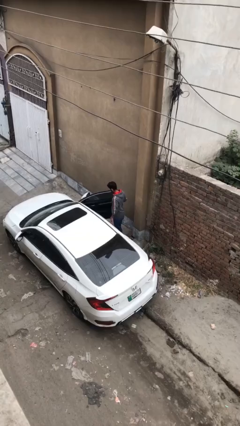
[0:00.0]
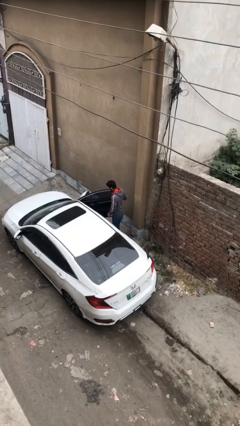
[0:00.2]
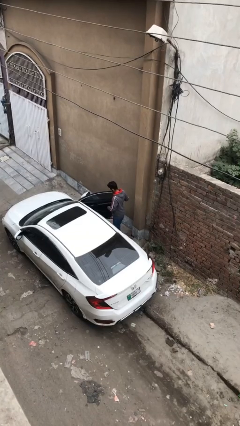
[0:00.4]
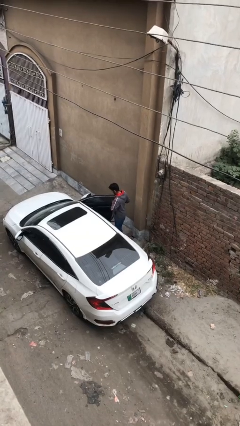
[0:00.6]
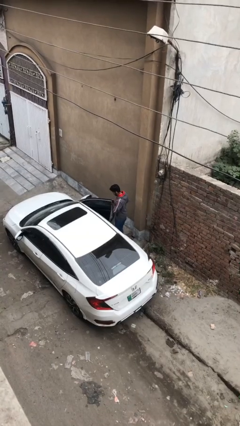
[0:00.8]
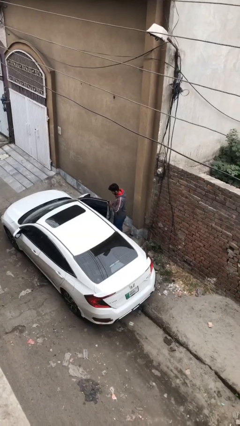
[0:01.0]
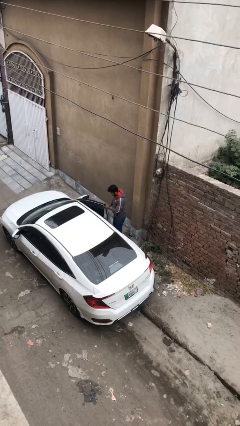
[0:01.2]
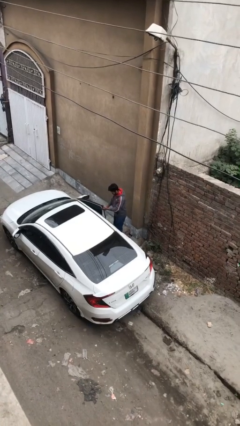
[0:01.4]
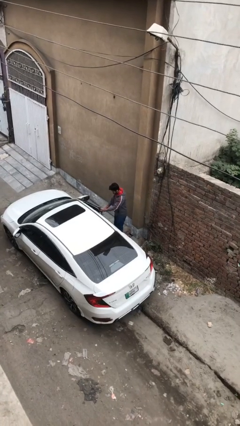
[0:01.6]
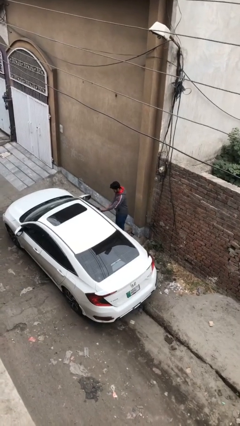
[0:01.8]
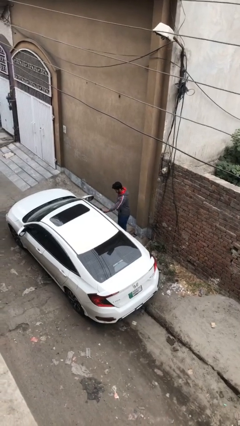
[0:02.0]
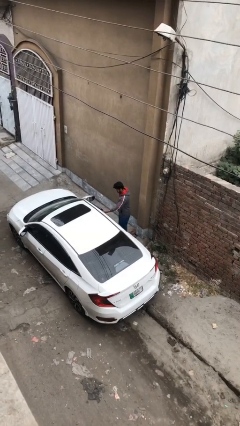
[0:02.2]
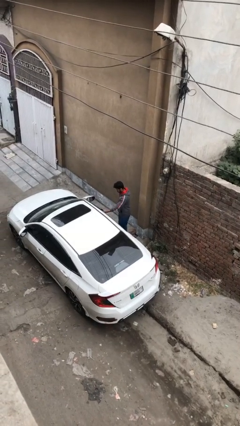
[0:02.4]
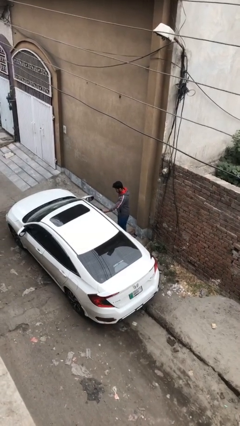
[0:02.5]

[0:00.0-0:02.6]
person closes car door

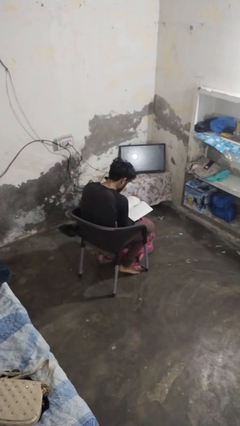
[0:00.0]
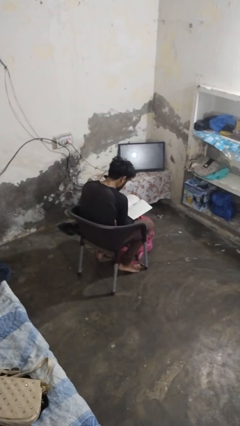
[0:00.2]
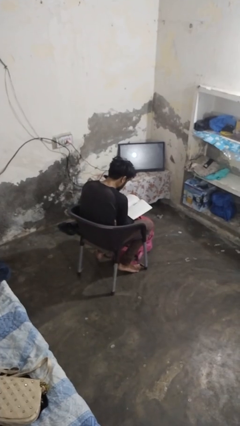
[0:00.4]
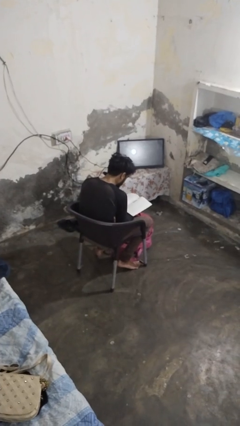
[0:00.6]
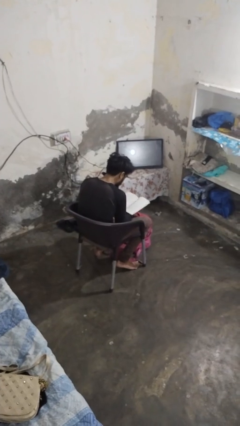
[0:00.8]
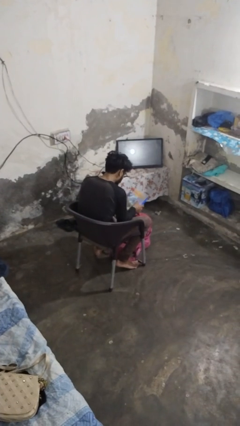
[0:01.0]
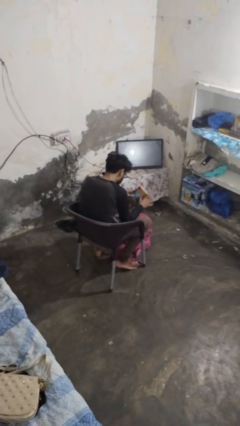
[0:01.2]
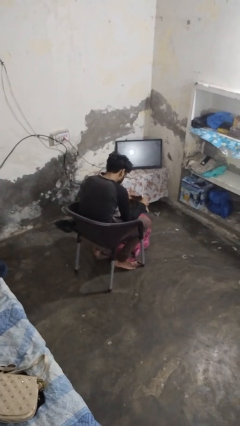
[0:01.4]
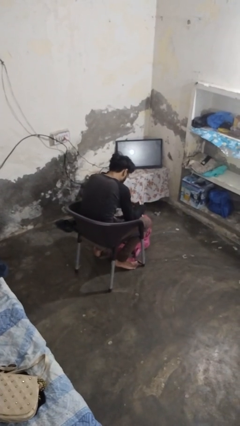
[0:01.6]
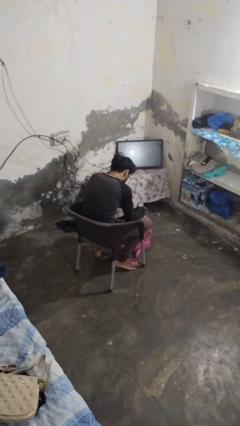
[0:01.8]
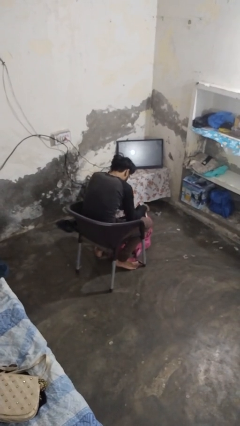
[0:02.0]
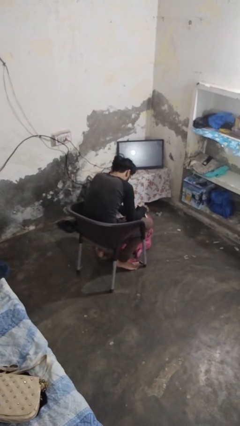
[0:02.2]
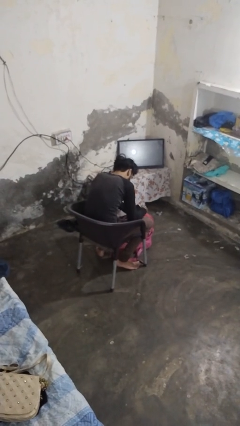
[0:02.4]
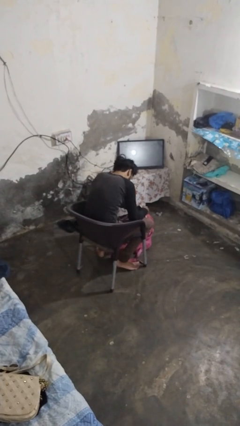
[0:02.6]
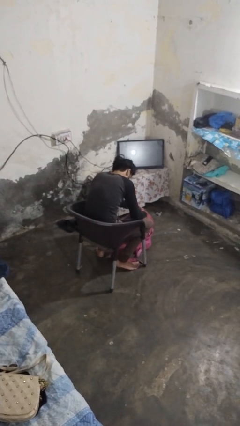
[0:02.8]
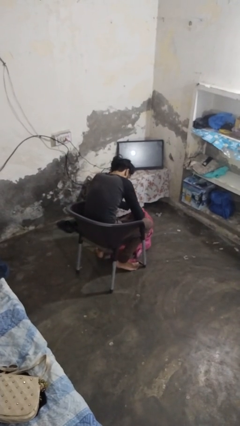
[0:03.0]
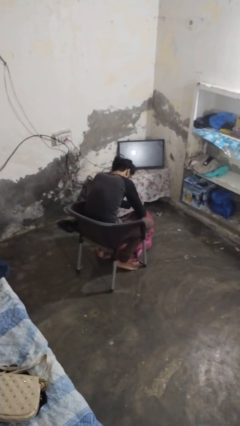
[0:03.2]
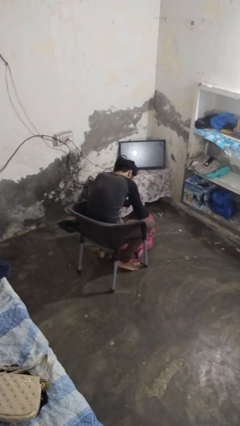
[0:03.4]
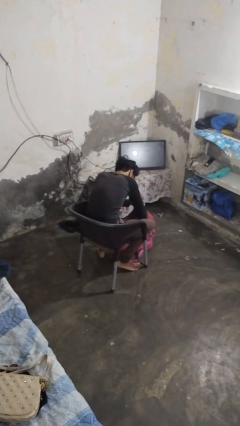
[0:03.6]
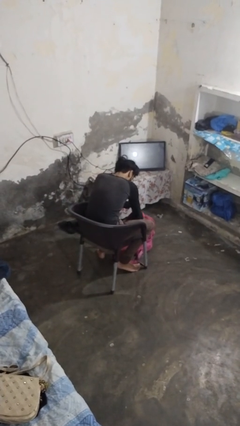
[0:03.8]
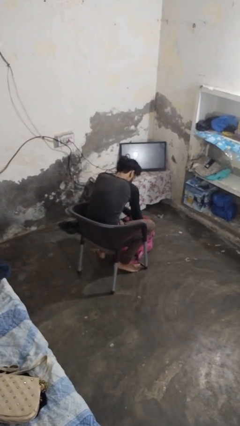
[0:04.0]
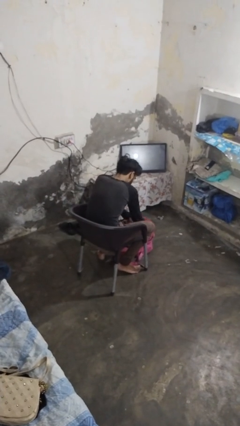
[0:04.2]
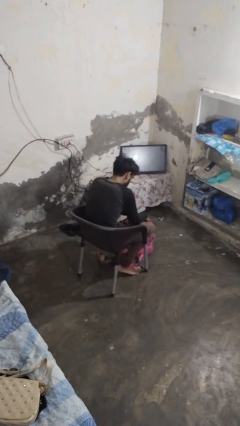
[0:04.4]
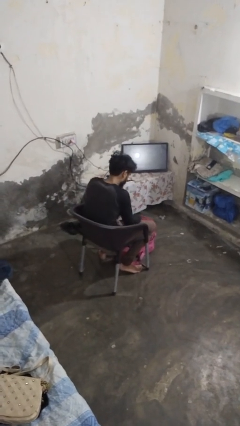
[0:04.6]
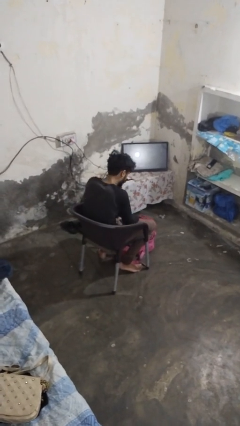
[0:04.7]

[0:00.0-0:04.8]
person puts object into backpack

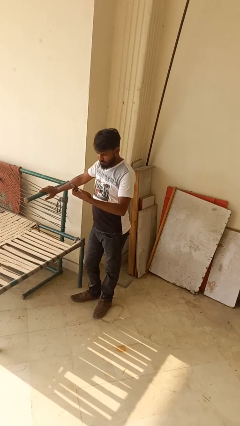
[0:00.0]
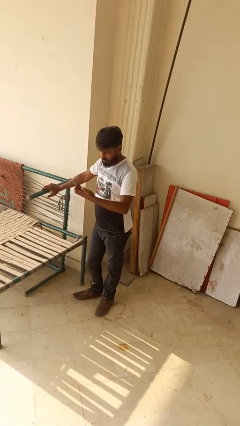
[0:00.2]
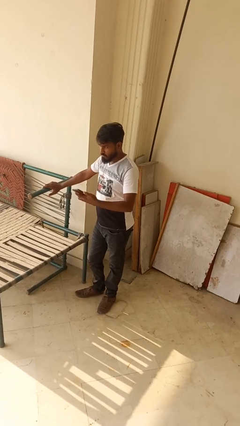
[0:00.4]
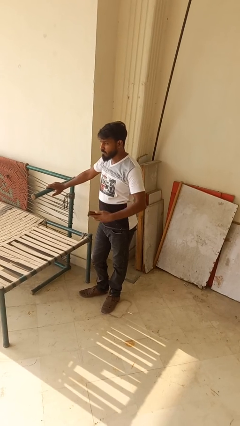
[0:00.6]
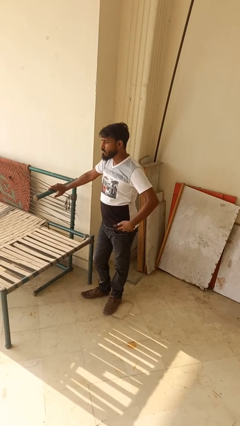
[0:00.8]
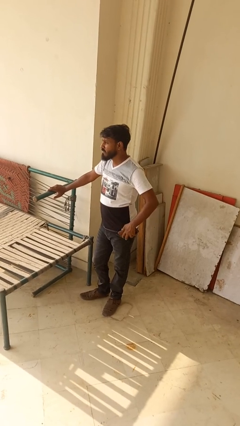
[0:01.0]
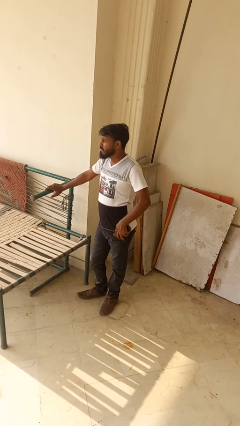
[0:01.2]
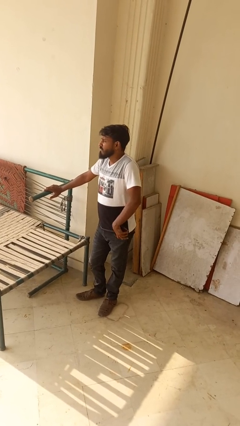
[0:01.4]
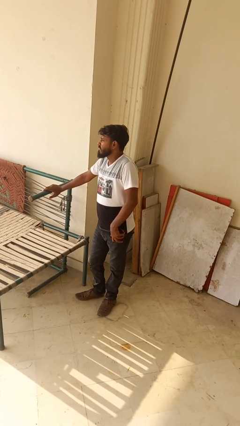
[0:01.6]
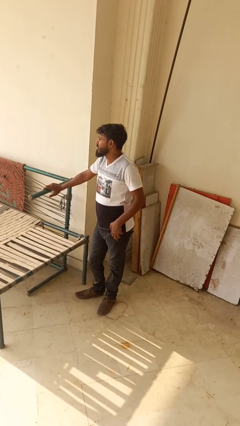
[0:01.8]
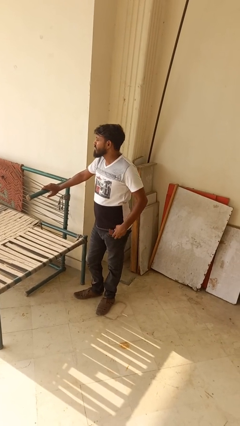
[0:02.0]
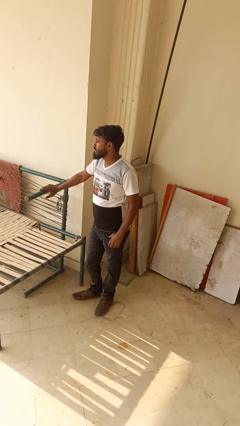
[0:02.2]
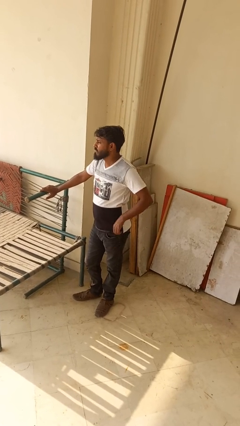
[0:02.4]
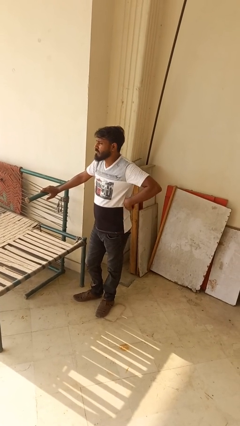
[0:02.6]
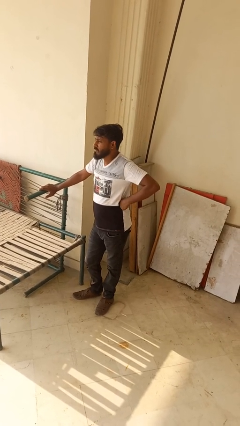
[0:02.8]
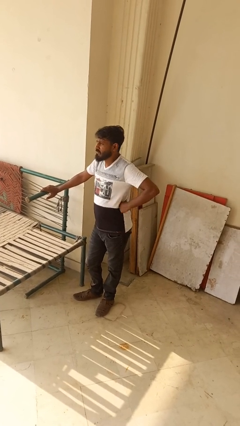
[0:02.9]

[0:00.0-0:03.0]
person puts phone into pocket

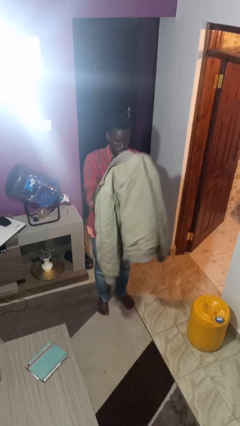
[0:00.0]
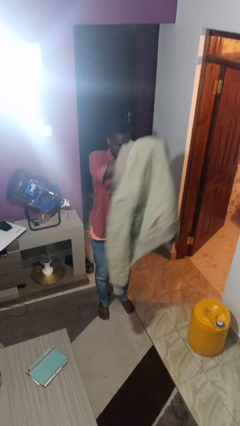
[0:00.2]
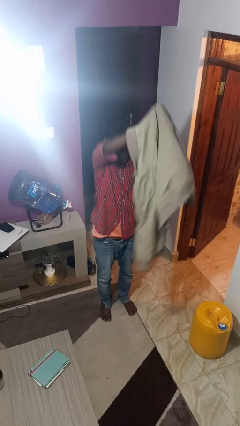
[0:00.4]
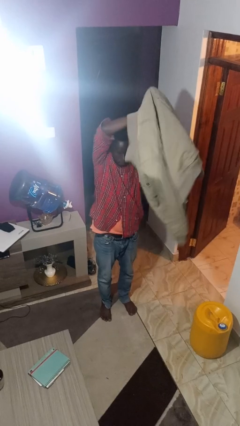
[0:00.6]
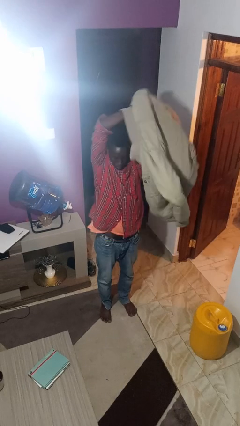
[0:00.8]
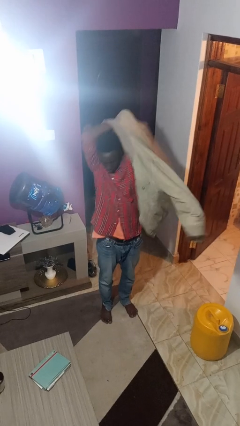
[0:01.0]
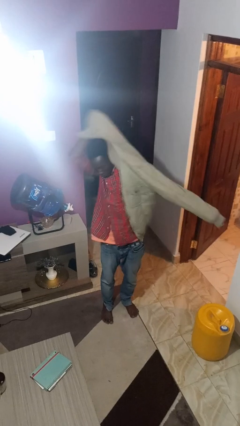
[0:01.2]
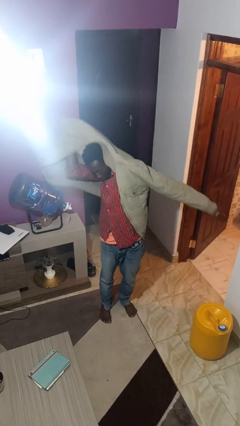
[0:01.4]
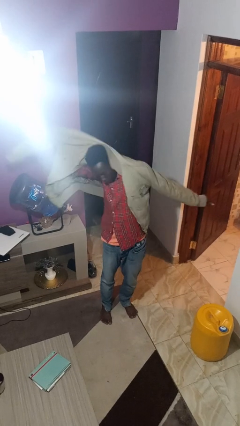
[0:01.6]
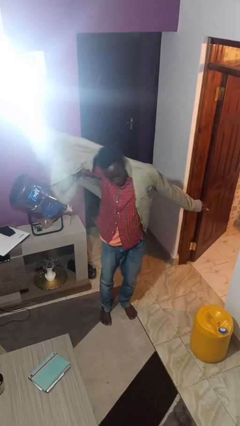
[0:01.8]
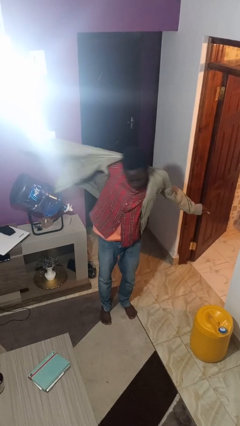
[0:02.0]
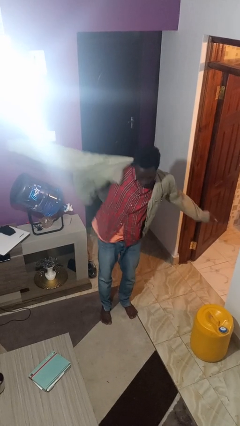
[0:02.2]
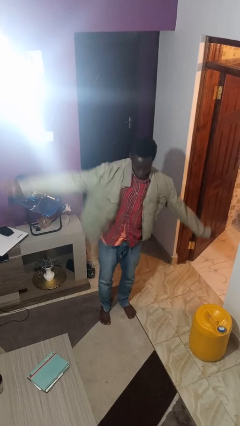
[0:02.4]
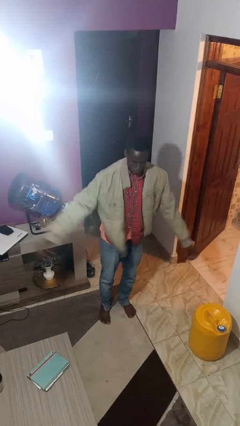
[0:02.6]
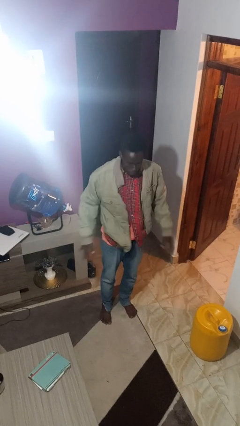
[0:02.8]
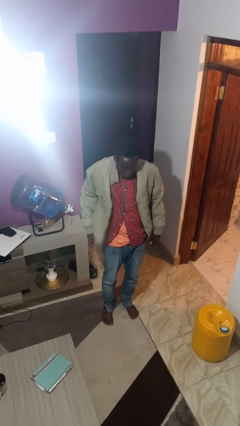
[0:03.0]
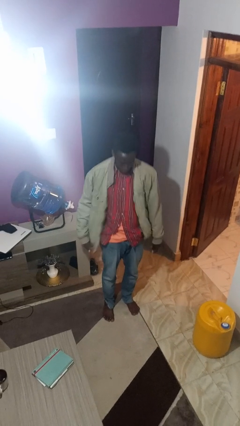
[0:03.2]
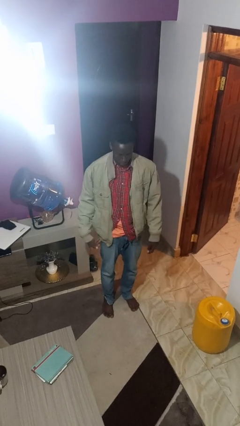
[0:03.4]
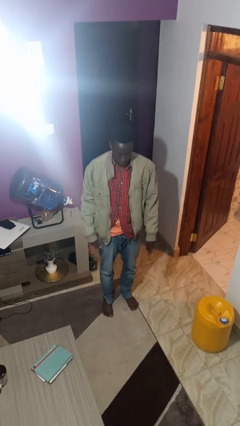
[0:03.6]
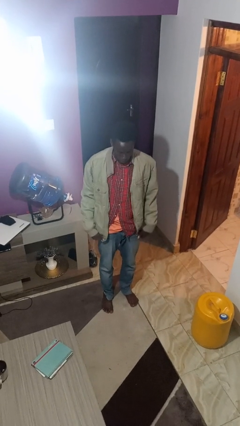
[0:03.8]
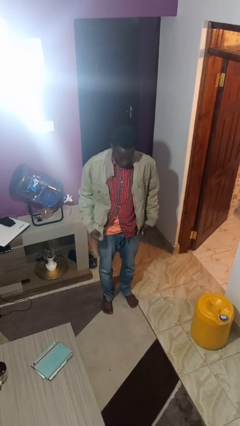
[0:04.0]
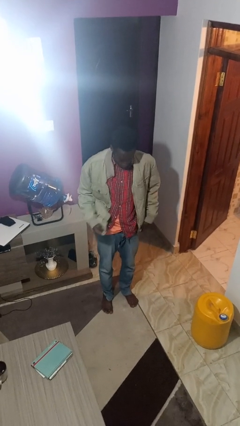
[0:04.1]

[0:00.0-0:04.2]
person puts on jacket

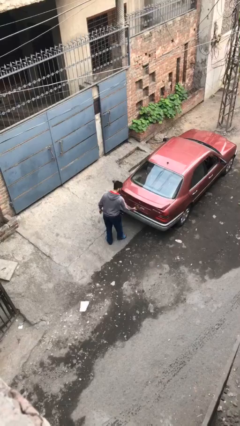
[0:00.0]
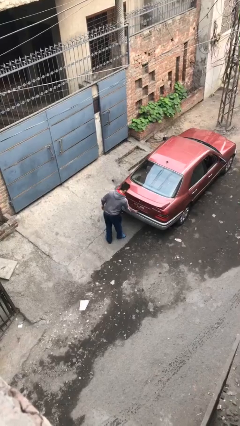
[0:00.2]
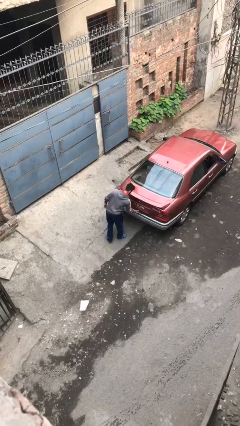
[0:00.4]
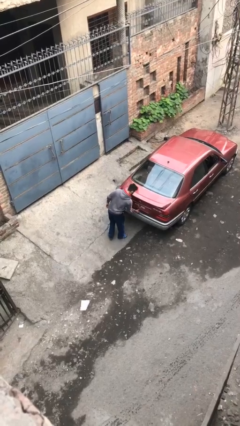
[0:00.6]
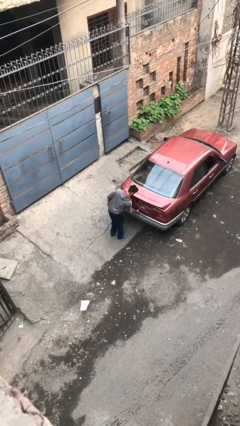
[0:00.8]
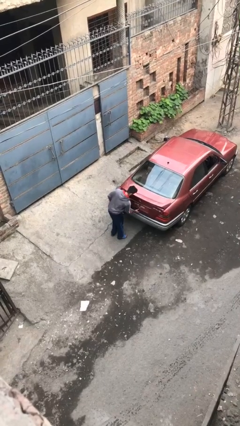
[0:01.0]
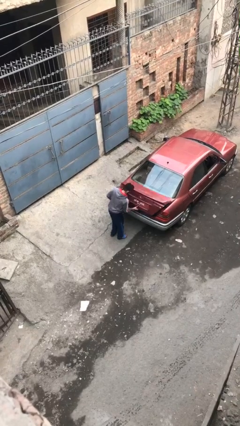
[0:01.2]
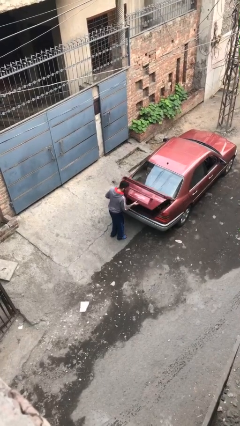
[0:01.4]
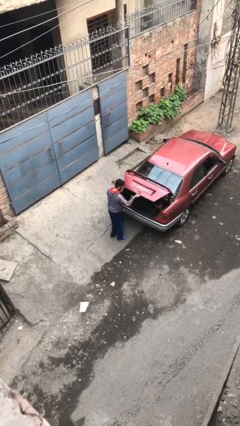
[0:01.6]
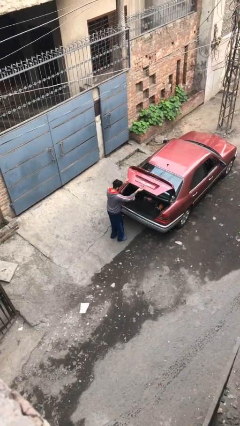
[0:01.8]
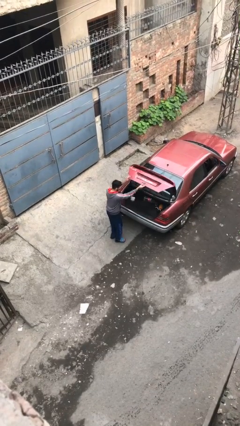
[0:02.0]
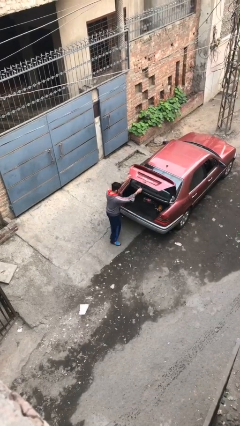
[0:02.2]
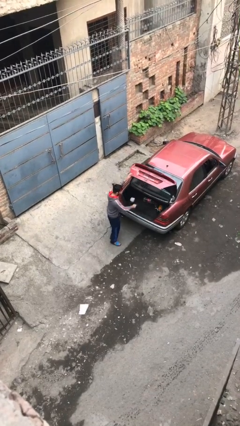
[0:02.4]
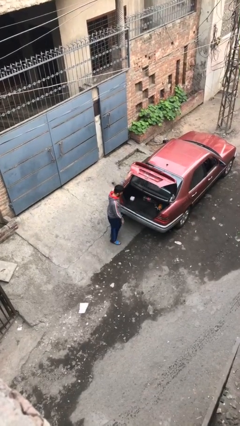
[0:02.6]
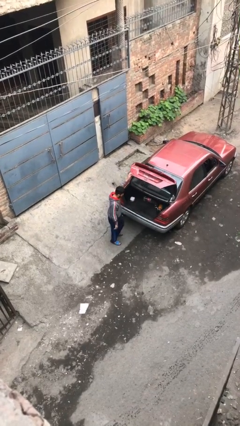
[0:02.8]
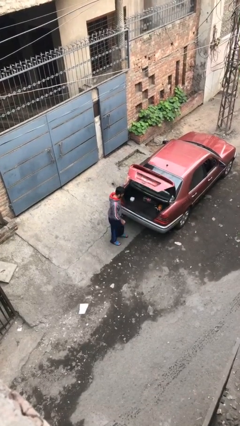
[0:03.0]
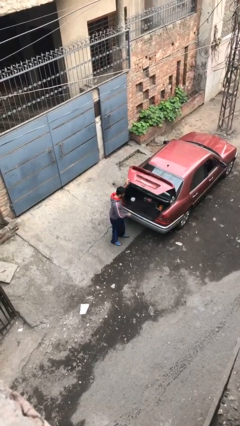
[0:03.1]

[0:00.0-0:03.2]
person opens car trunk
